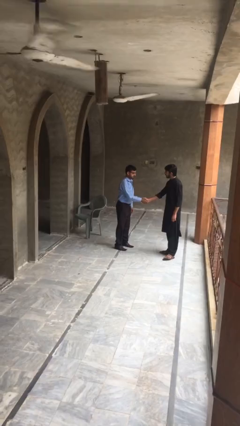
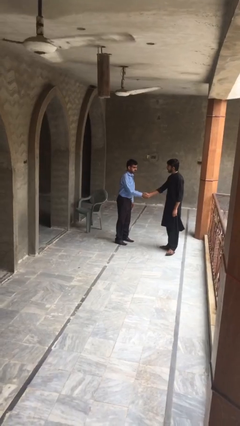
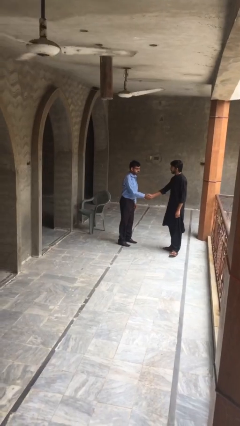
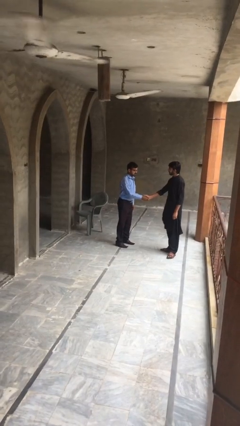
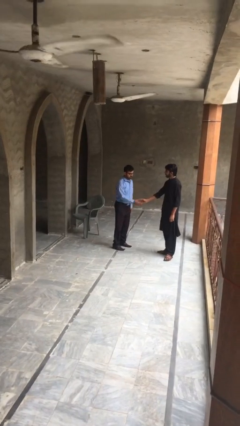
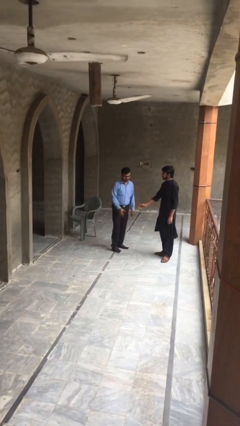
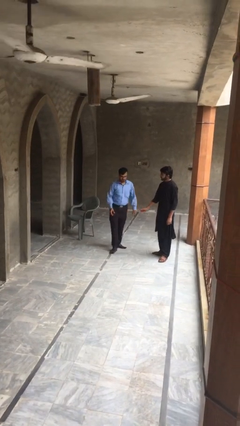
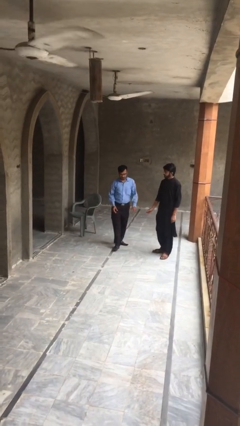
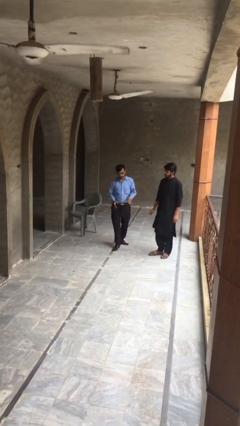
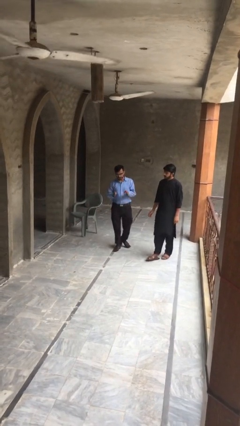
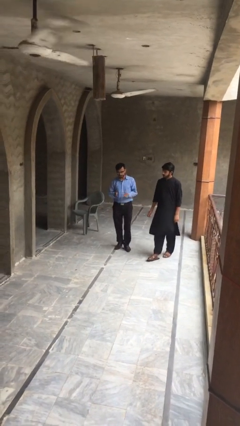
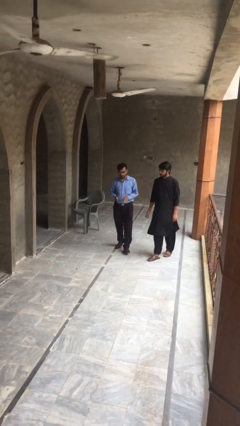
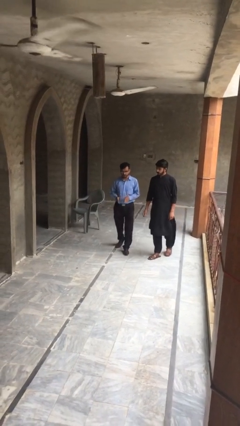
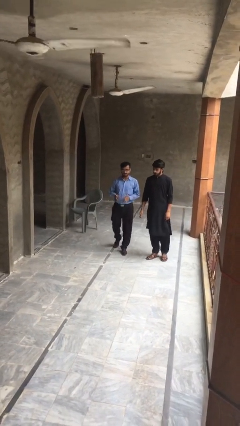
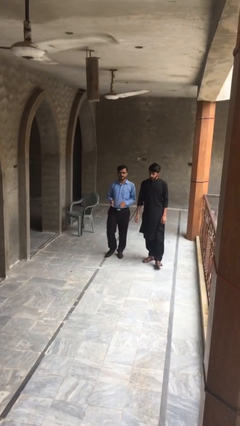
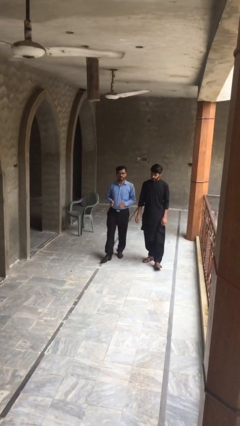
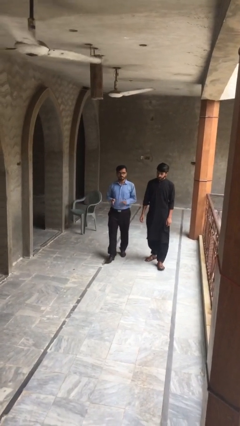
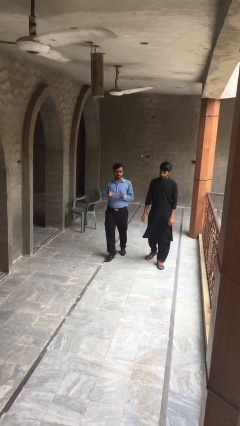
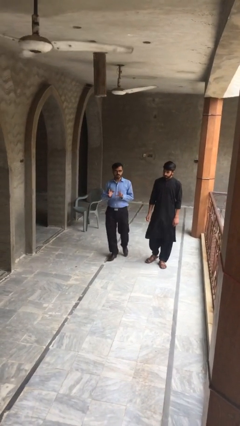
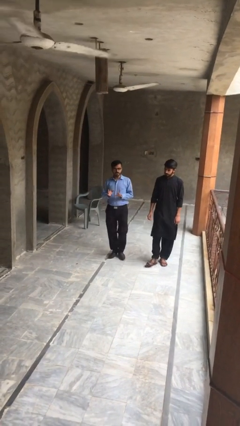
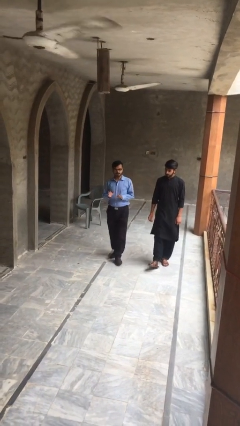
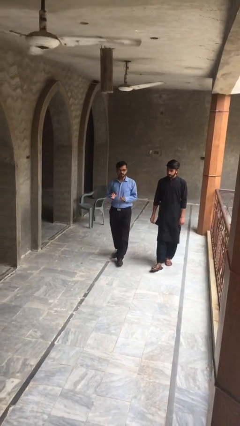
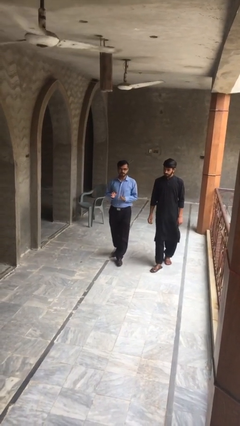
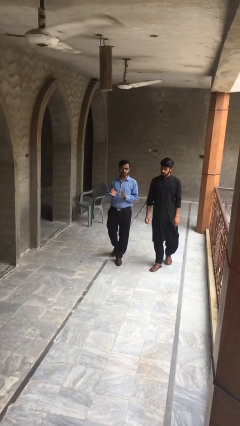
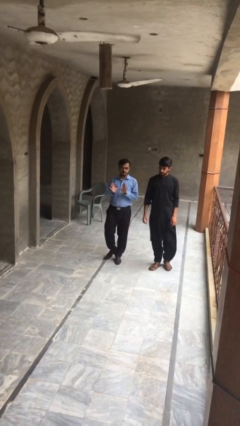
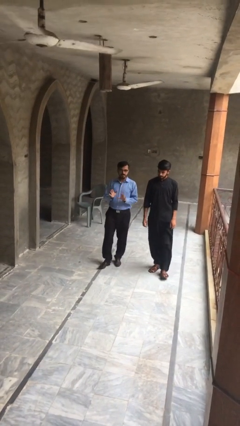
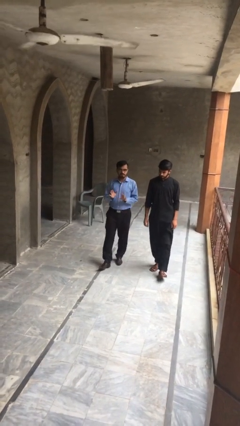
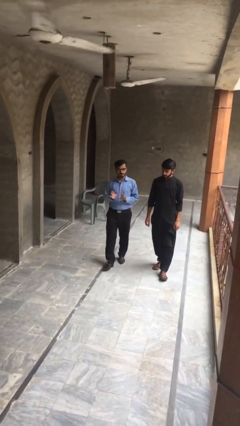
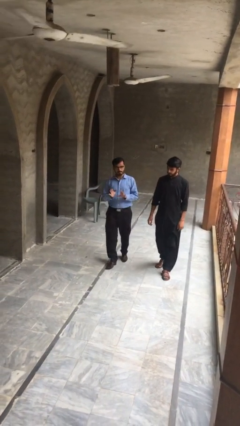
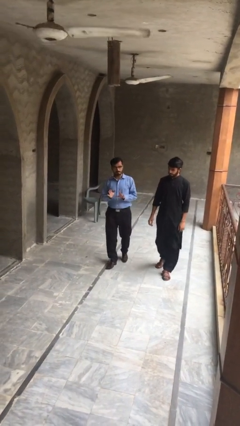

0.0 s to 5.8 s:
person talks to person

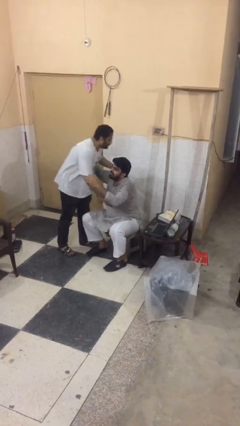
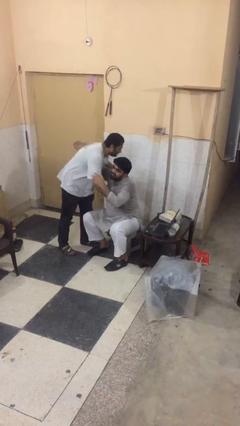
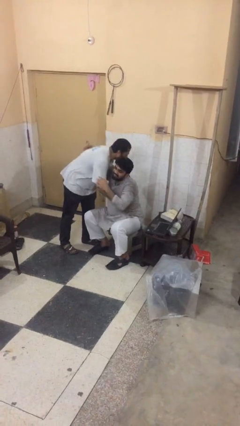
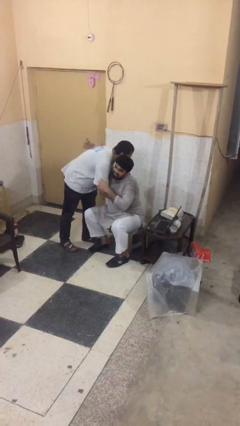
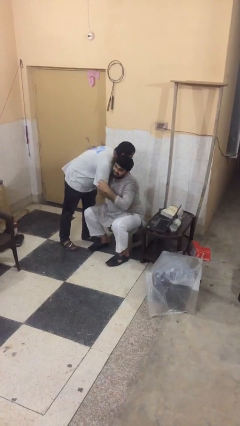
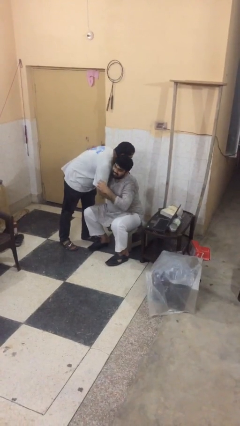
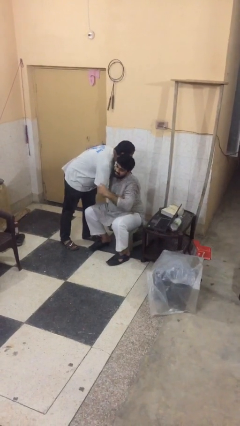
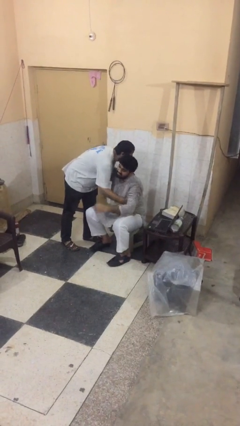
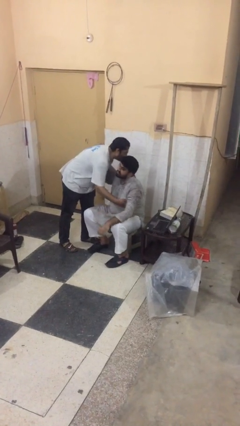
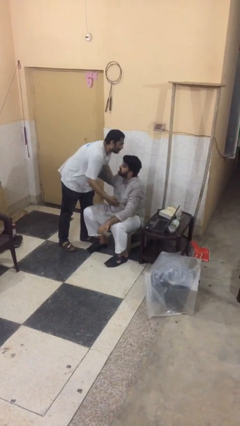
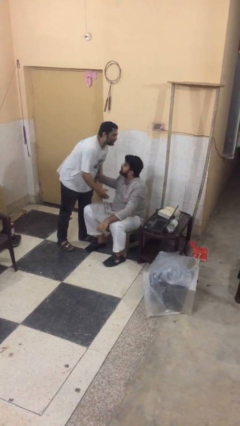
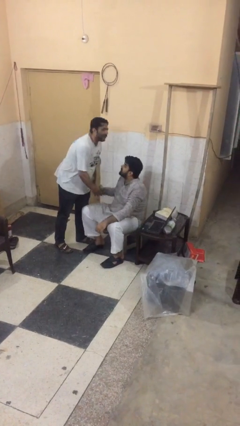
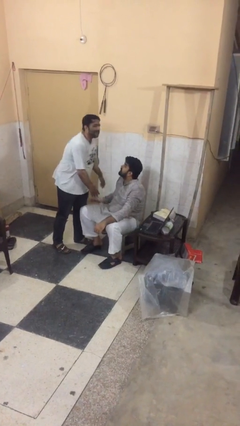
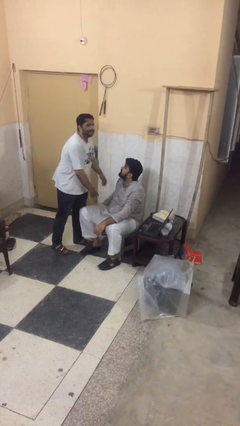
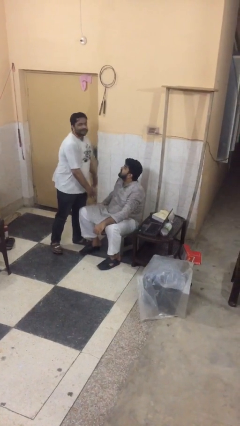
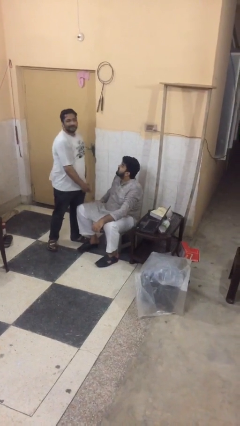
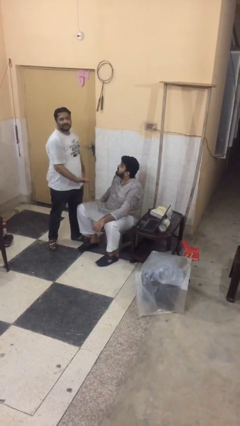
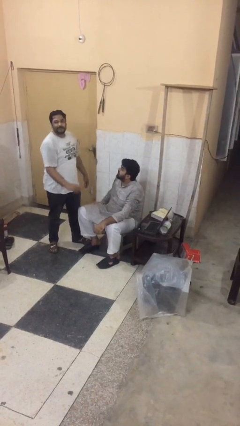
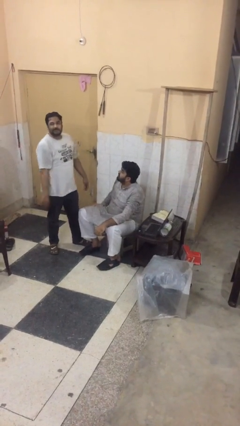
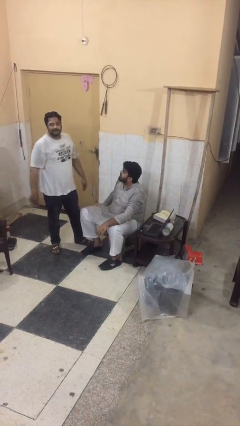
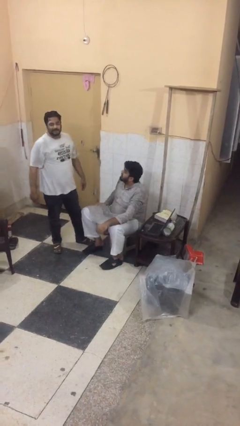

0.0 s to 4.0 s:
person embraces person

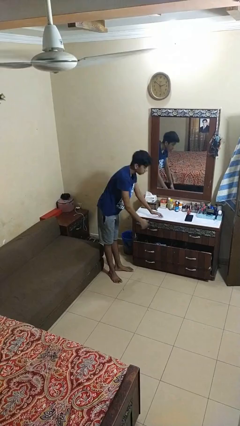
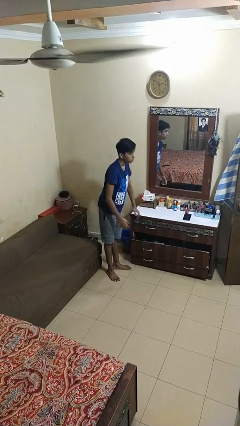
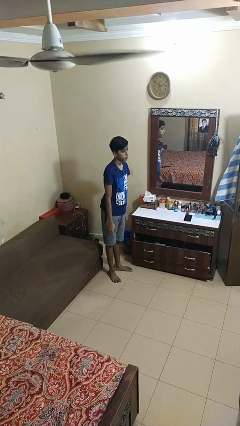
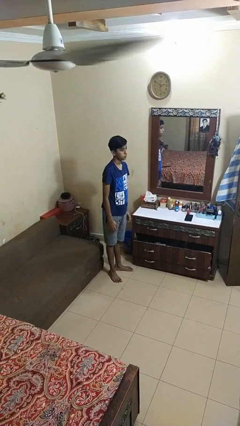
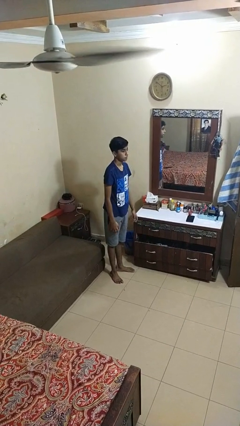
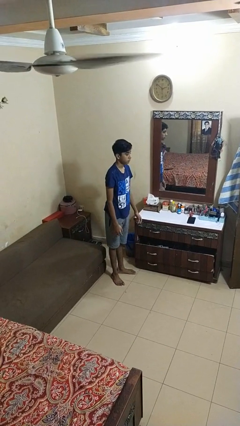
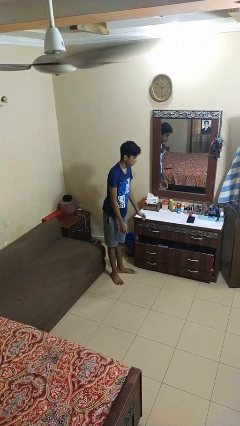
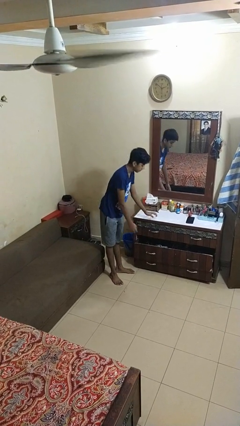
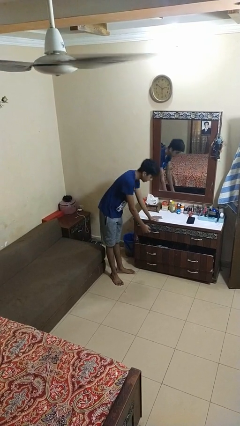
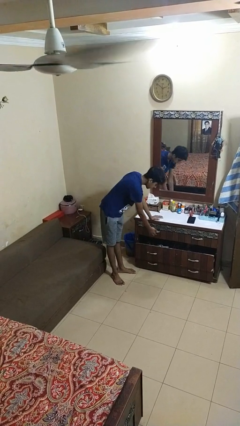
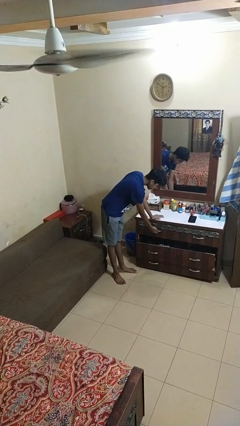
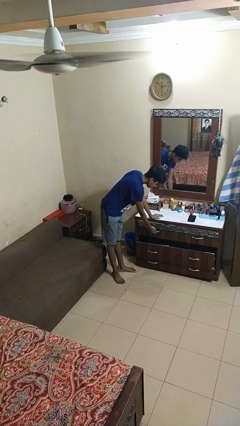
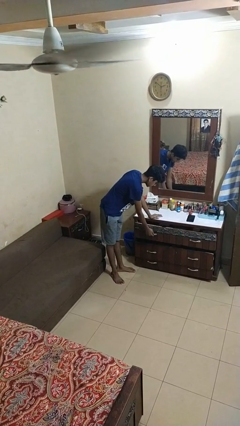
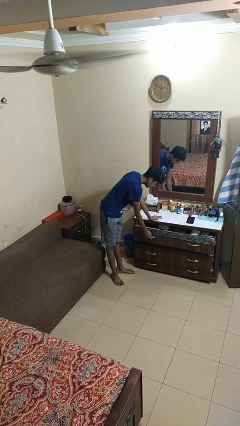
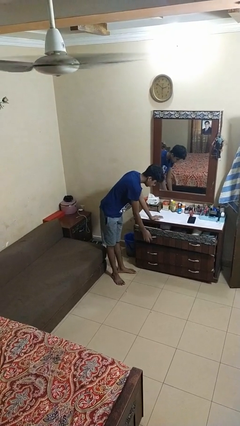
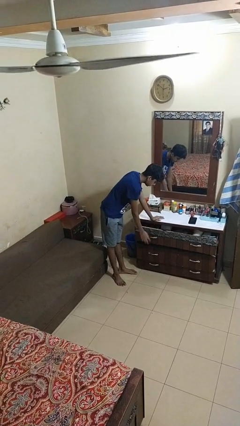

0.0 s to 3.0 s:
person opens dresser drawer

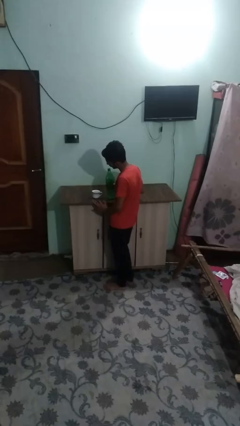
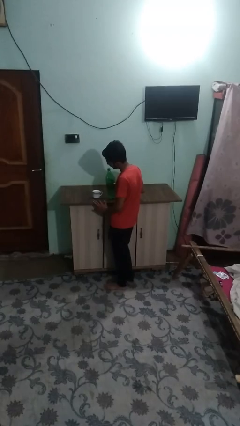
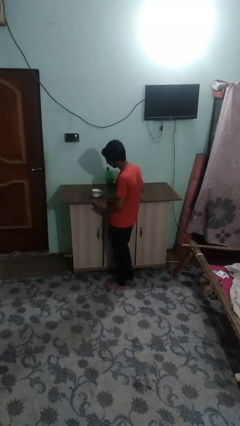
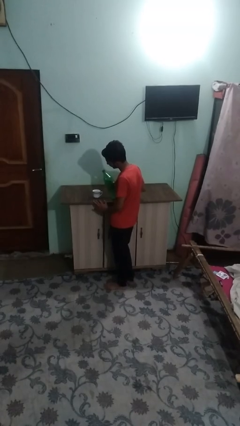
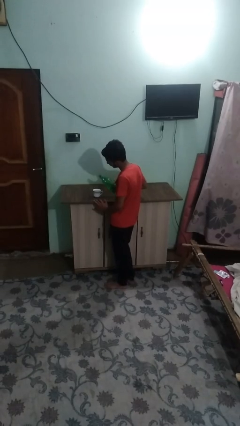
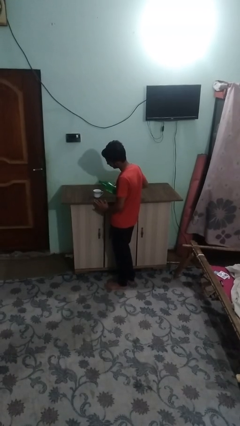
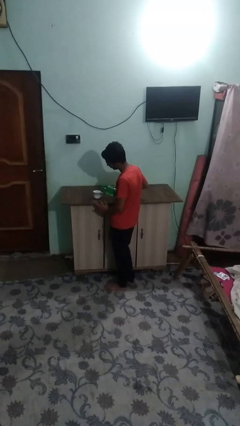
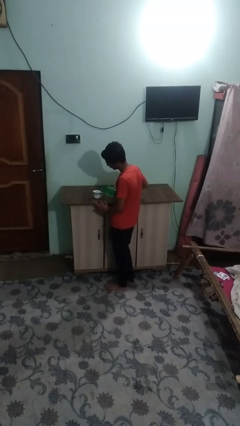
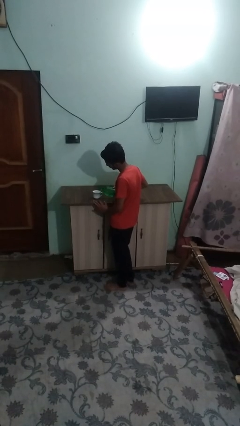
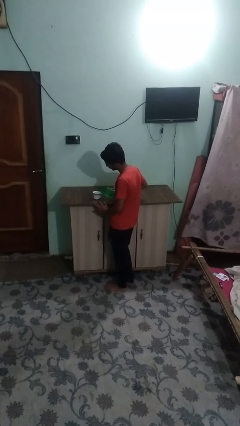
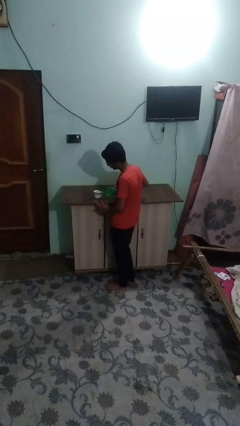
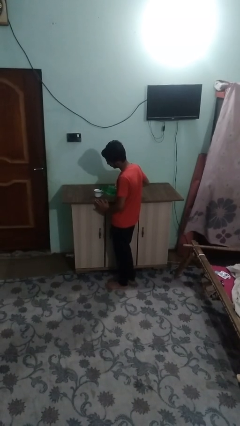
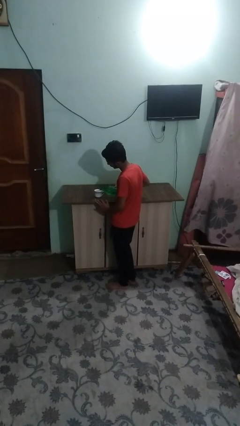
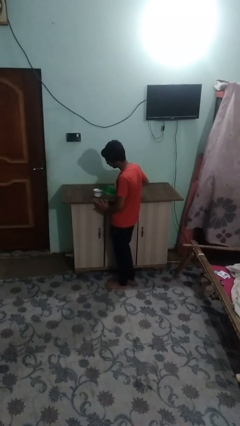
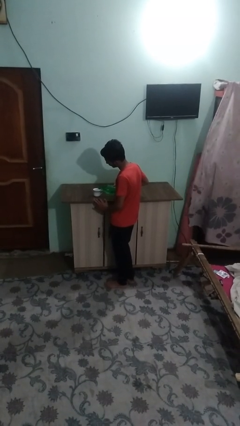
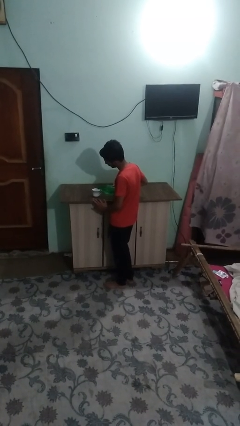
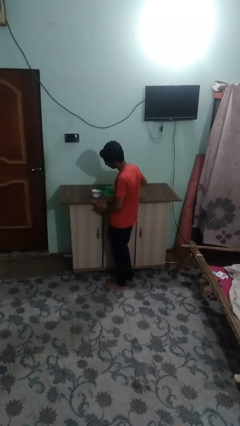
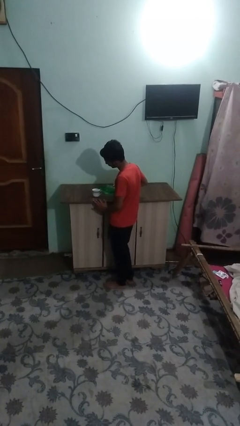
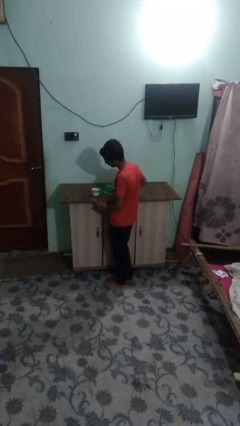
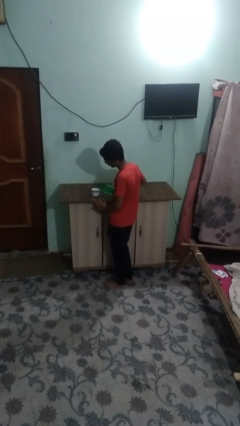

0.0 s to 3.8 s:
person pours liquid into cup

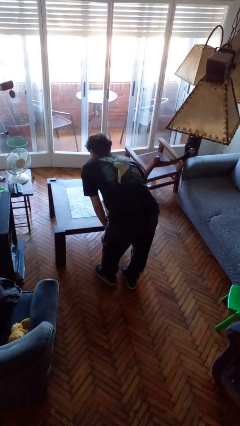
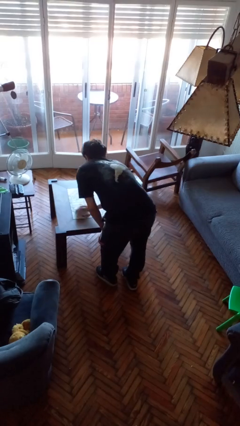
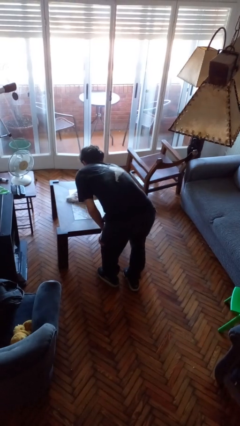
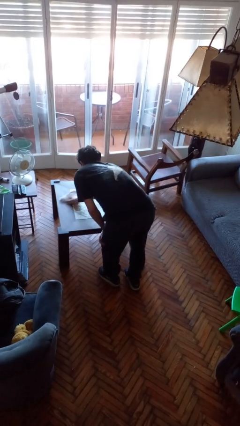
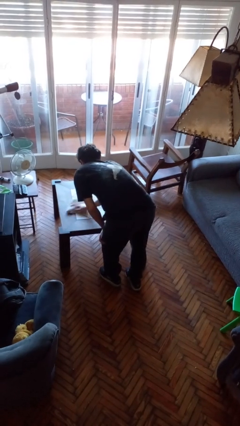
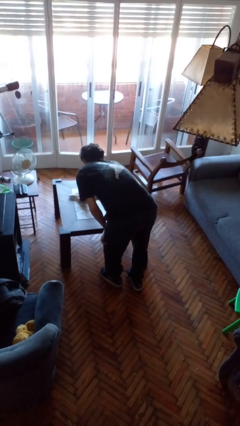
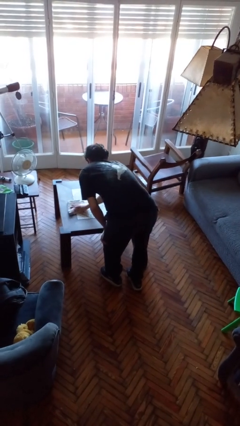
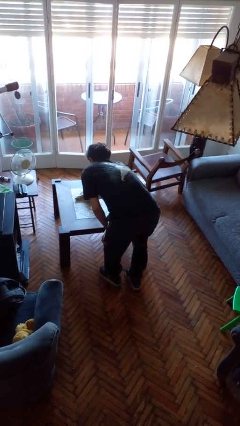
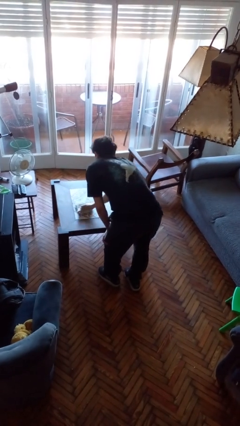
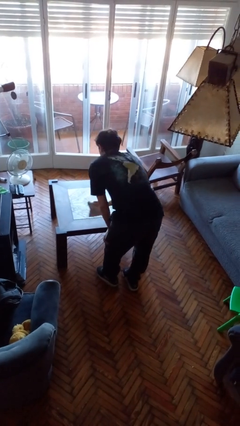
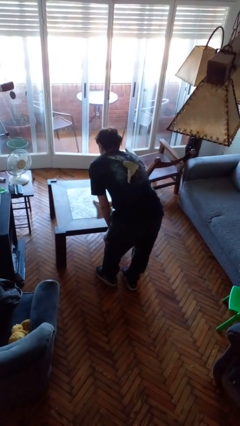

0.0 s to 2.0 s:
person cleans table with rag
